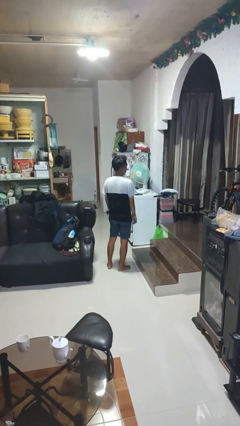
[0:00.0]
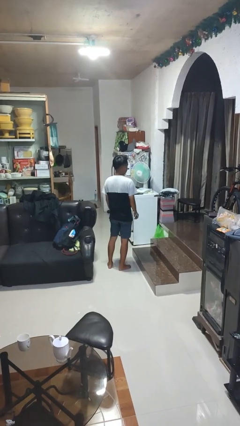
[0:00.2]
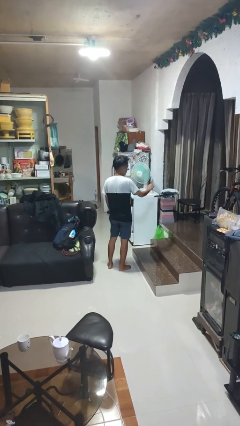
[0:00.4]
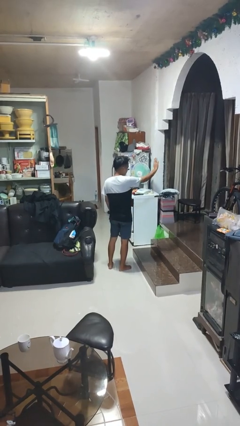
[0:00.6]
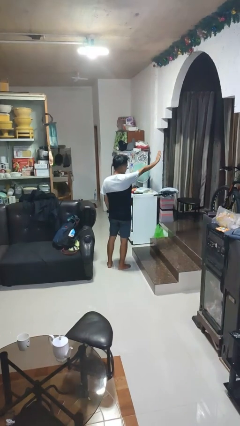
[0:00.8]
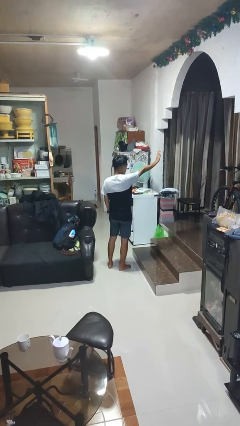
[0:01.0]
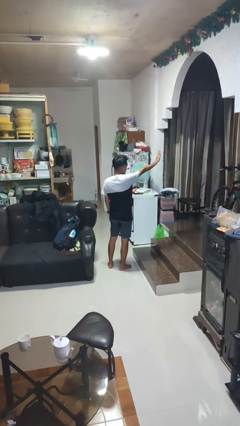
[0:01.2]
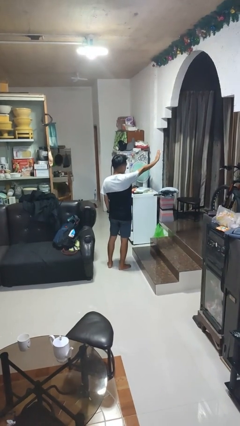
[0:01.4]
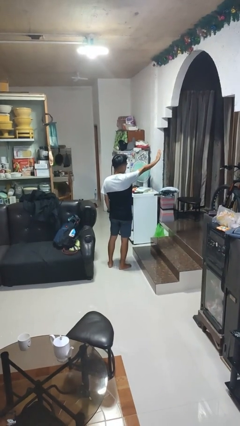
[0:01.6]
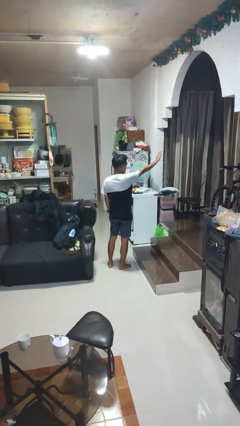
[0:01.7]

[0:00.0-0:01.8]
person gestures stop

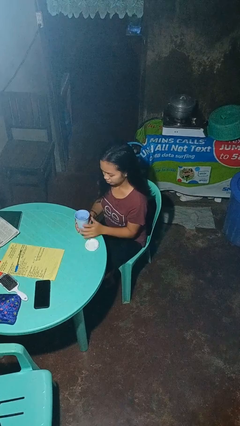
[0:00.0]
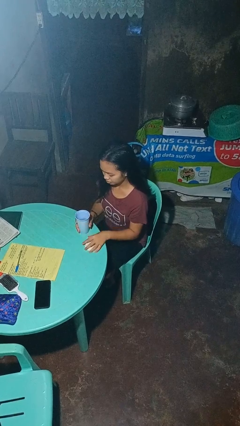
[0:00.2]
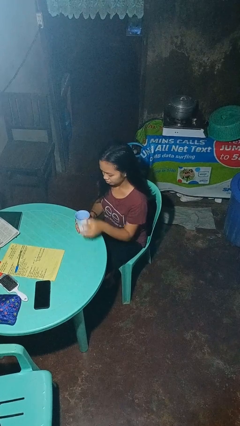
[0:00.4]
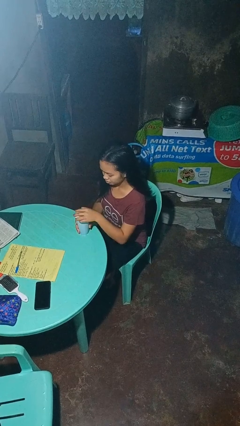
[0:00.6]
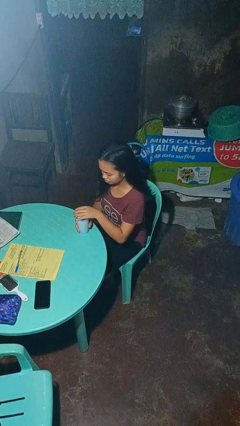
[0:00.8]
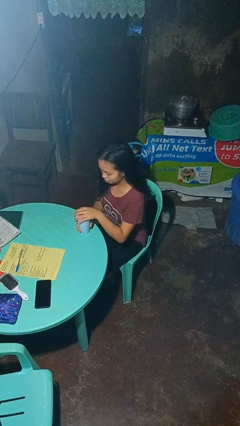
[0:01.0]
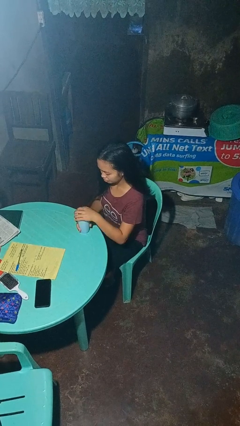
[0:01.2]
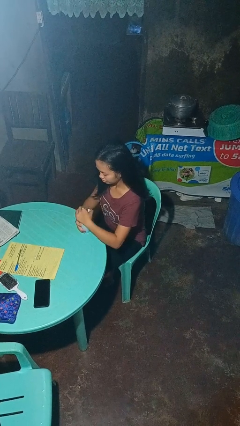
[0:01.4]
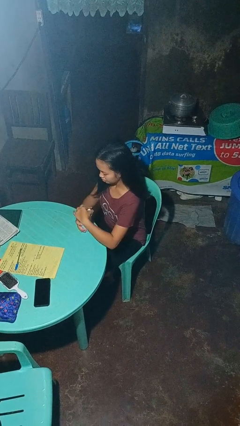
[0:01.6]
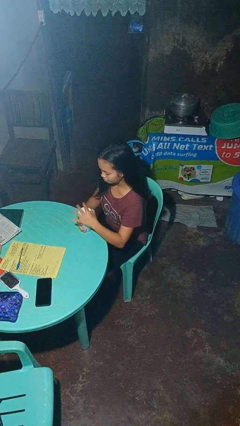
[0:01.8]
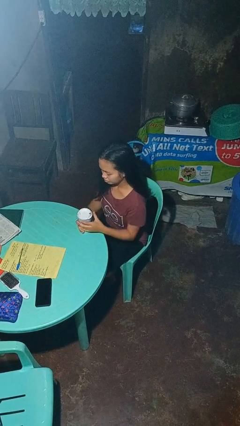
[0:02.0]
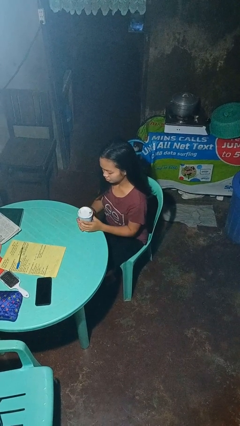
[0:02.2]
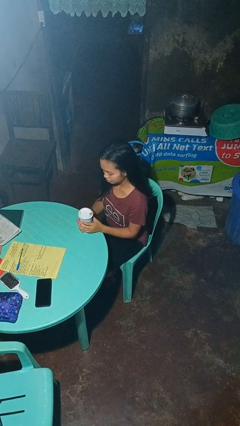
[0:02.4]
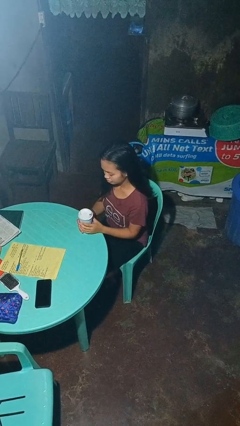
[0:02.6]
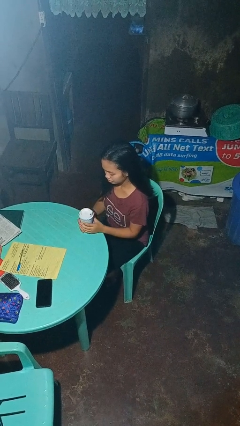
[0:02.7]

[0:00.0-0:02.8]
person screws lid to bottle

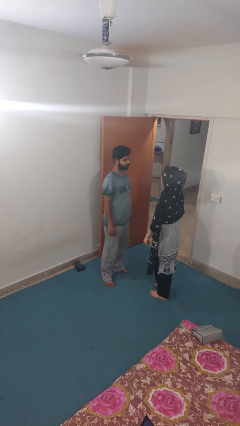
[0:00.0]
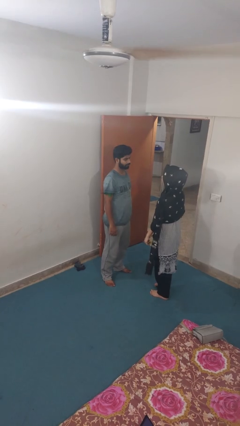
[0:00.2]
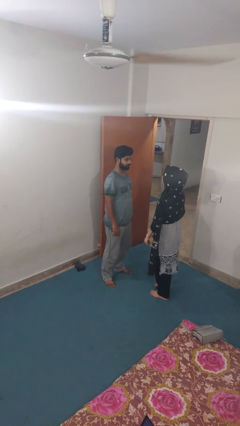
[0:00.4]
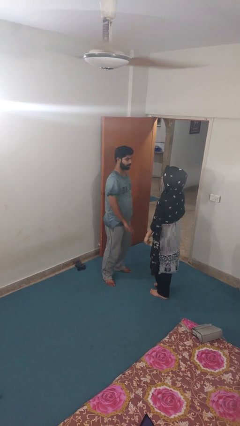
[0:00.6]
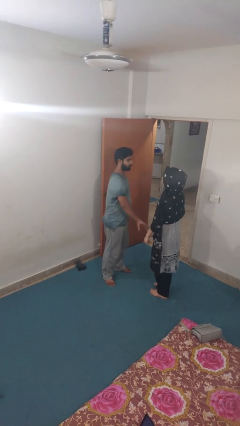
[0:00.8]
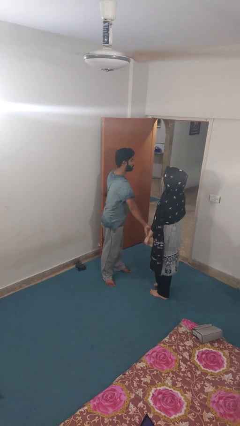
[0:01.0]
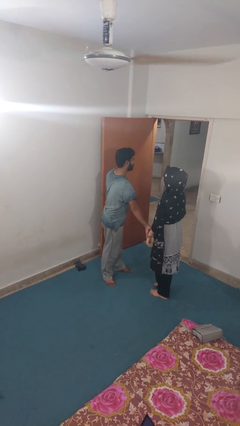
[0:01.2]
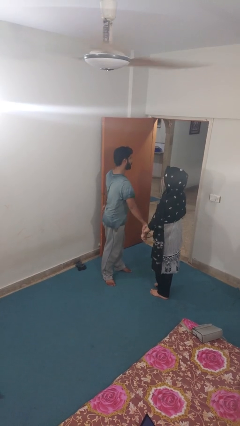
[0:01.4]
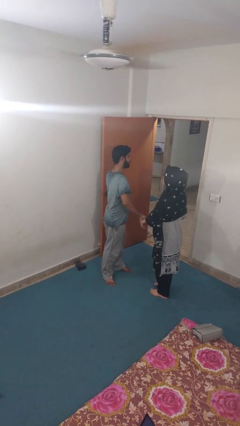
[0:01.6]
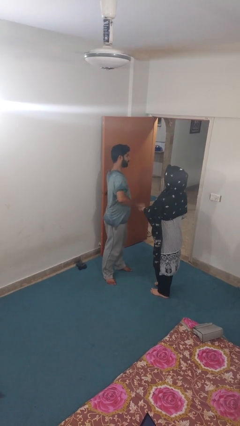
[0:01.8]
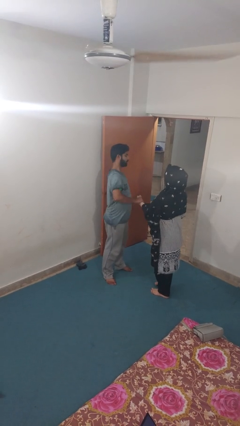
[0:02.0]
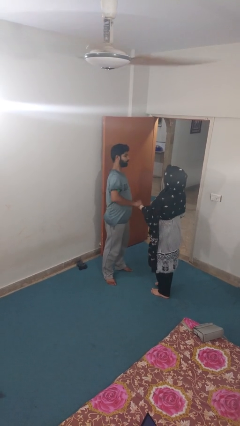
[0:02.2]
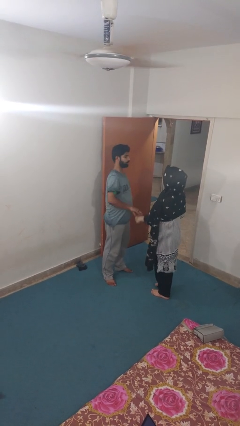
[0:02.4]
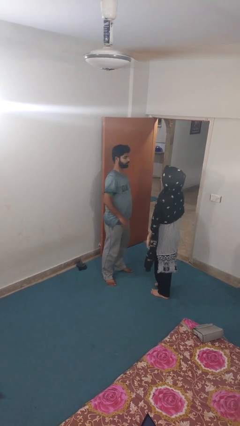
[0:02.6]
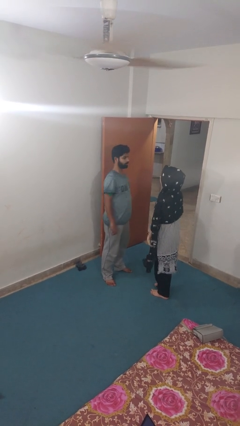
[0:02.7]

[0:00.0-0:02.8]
person grabs person by forearm

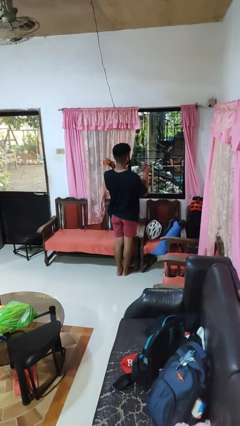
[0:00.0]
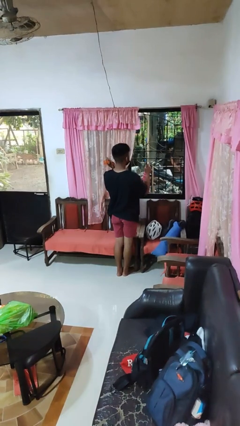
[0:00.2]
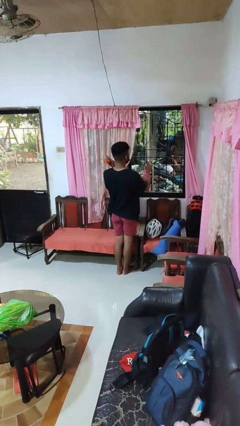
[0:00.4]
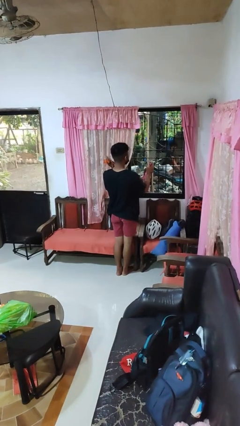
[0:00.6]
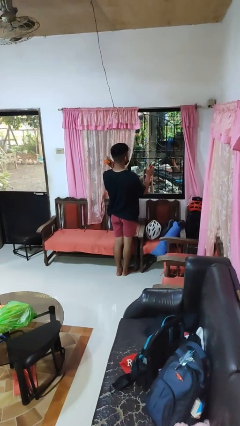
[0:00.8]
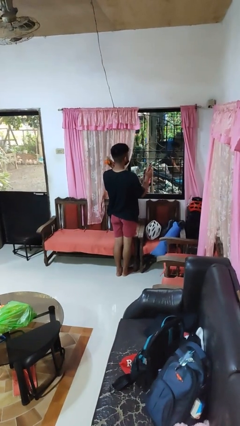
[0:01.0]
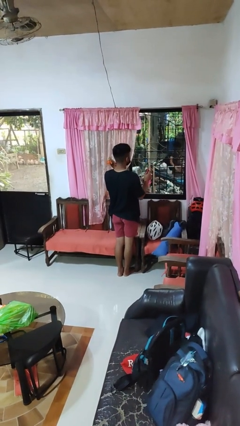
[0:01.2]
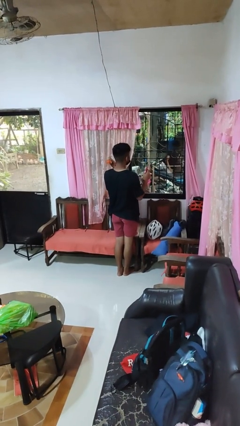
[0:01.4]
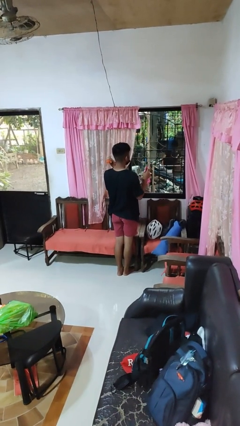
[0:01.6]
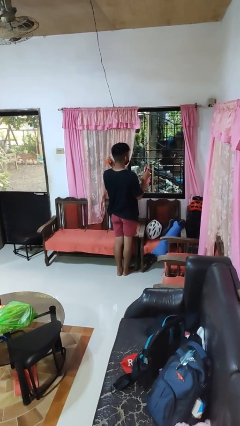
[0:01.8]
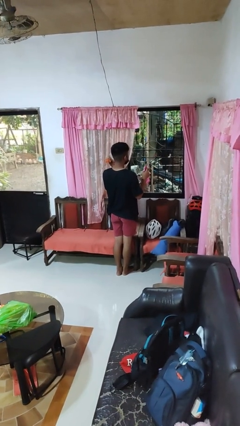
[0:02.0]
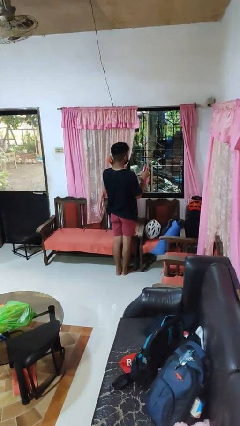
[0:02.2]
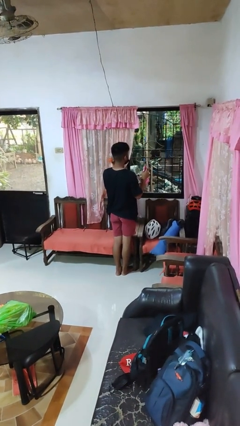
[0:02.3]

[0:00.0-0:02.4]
person sprays from bottle

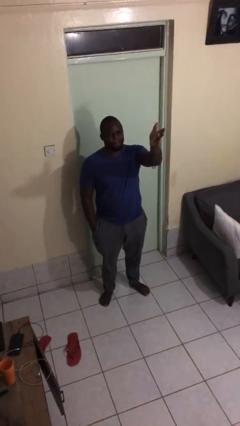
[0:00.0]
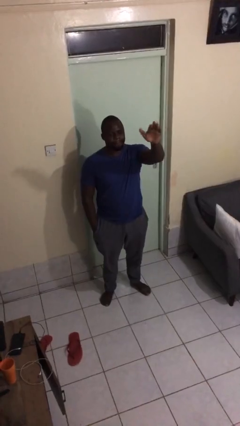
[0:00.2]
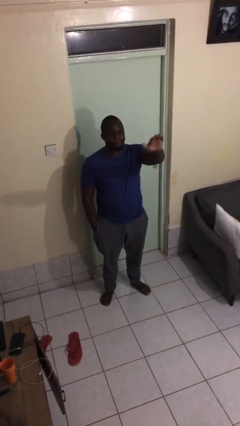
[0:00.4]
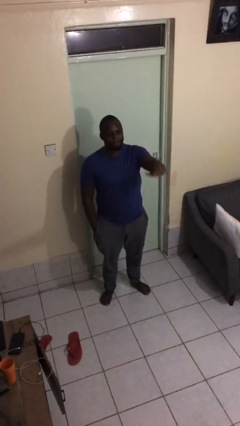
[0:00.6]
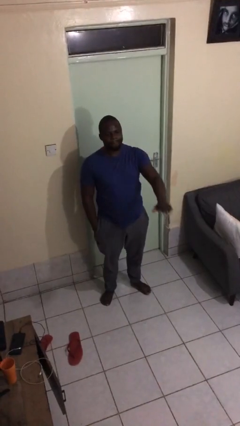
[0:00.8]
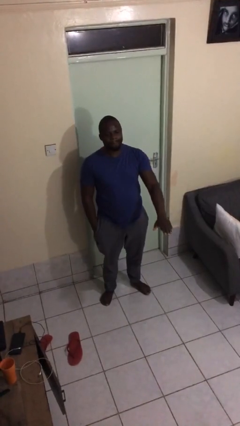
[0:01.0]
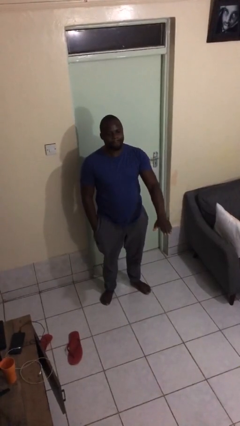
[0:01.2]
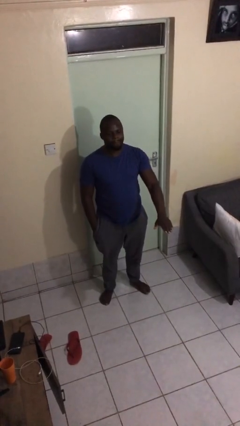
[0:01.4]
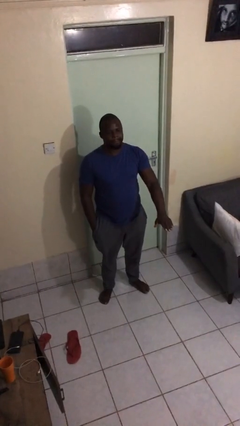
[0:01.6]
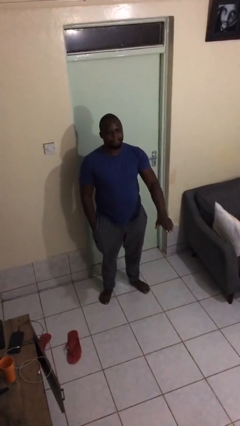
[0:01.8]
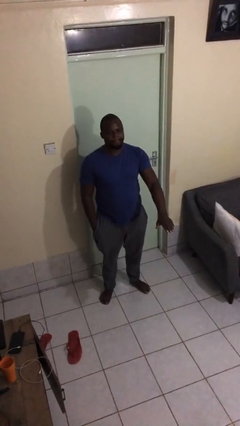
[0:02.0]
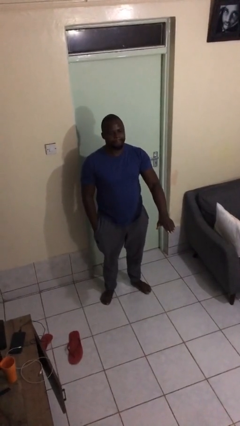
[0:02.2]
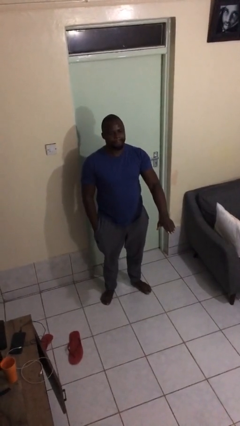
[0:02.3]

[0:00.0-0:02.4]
person gestures swipe down

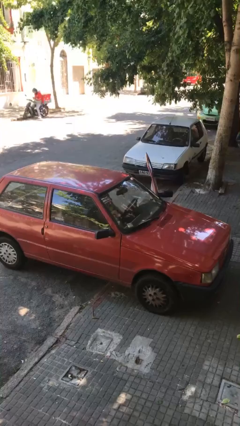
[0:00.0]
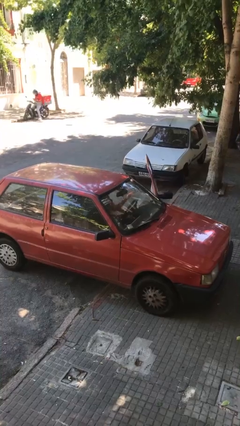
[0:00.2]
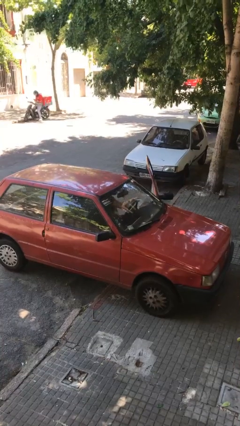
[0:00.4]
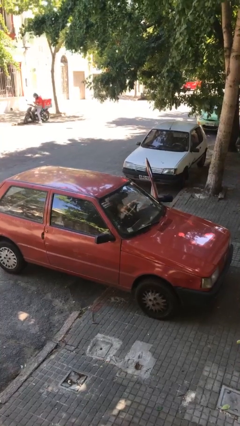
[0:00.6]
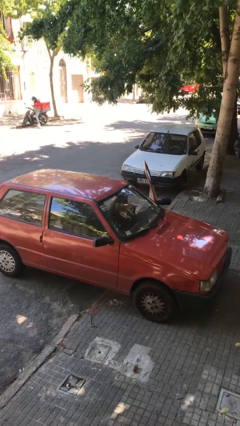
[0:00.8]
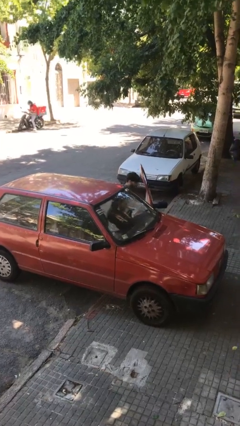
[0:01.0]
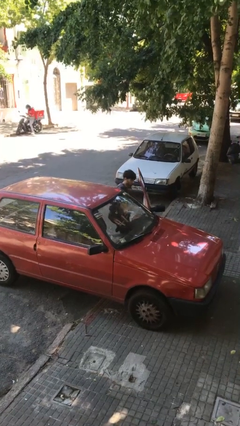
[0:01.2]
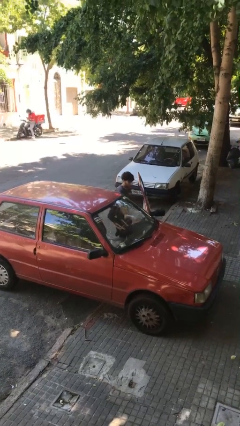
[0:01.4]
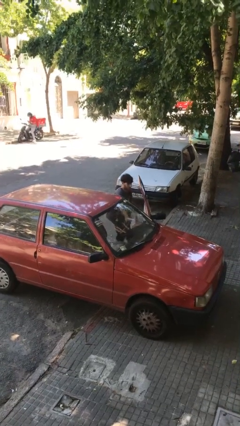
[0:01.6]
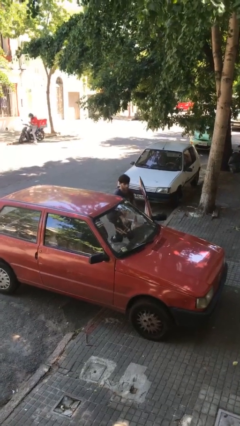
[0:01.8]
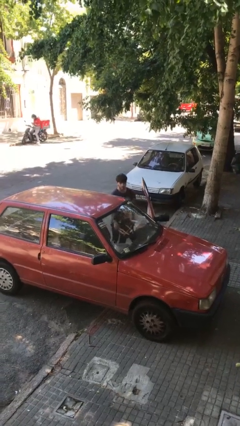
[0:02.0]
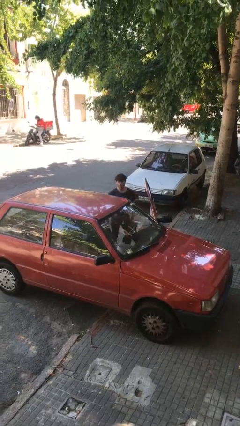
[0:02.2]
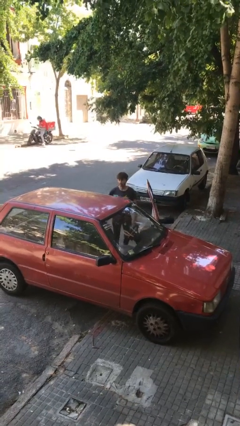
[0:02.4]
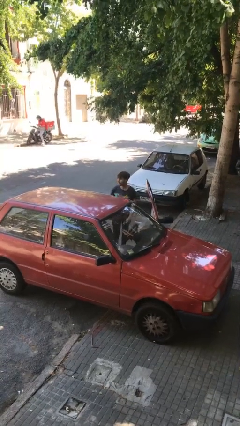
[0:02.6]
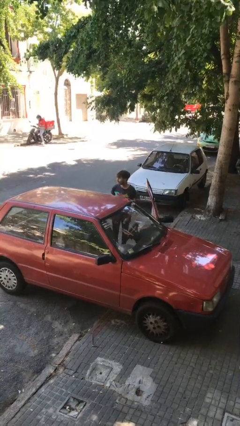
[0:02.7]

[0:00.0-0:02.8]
person exits car

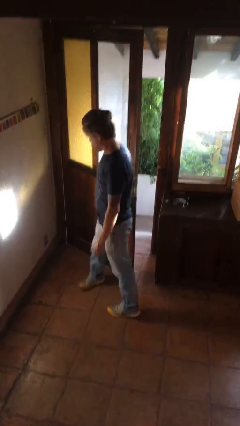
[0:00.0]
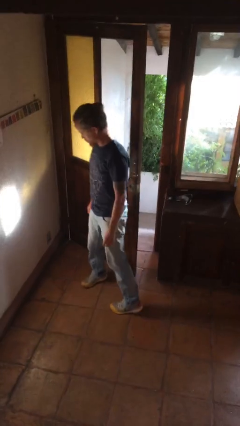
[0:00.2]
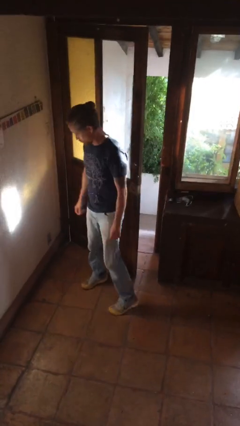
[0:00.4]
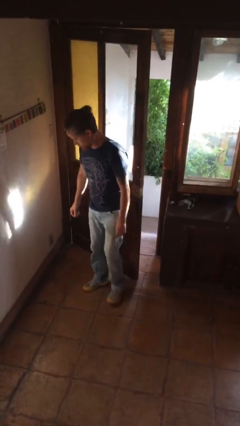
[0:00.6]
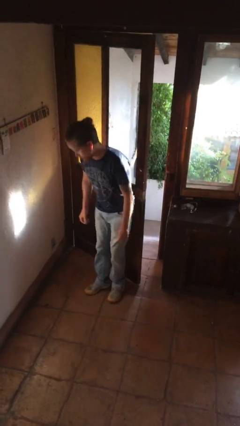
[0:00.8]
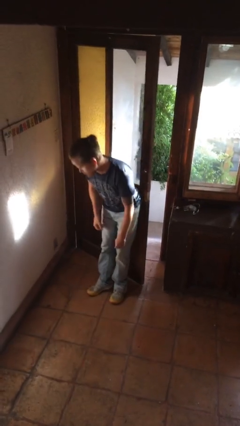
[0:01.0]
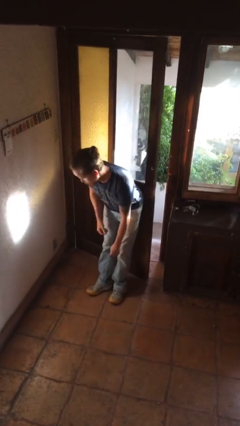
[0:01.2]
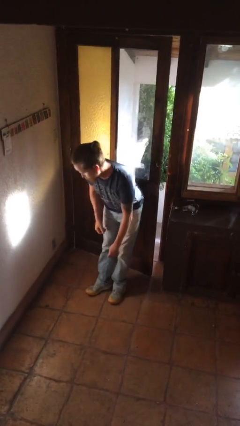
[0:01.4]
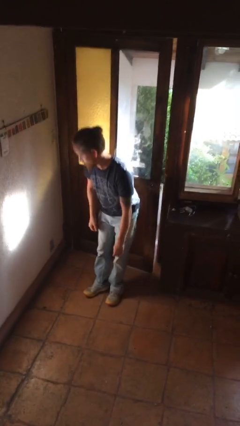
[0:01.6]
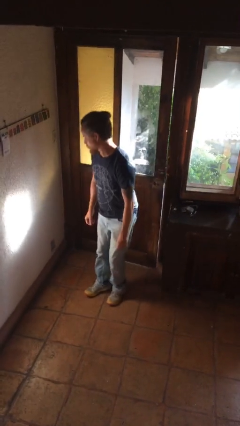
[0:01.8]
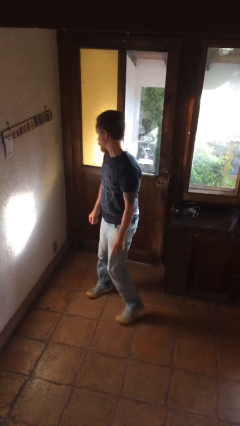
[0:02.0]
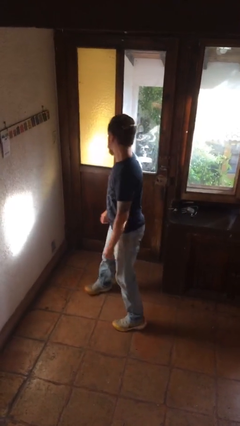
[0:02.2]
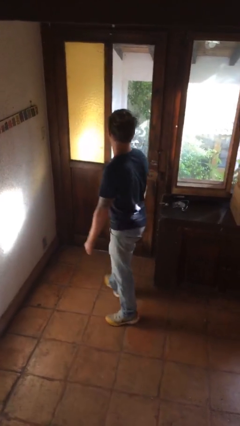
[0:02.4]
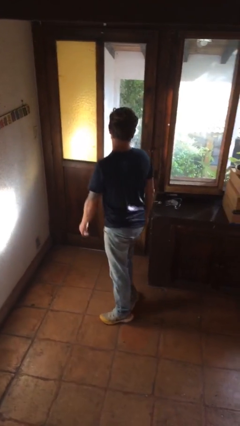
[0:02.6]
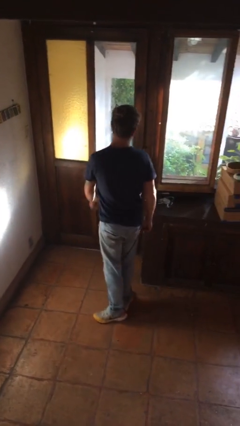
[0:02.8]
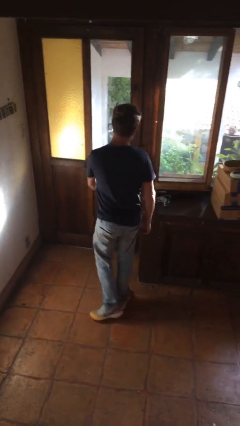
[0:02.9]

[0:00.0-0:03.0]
person closes door with hip
